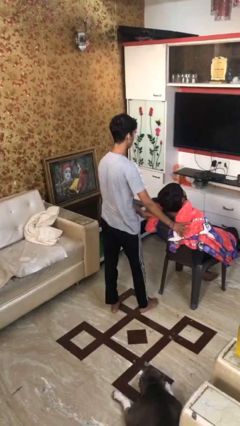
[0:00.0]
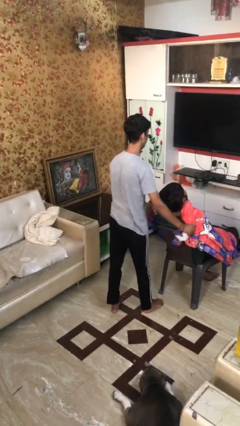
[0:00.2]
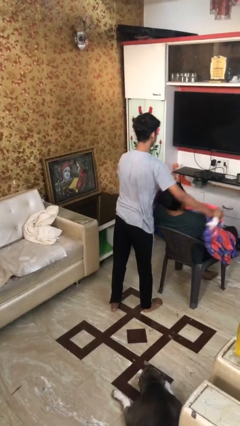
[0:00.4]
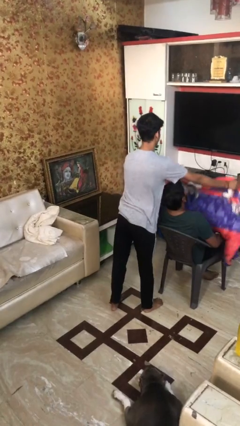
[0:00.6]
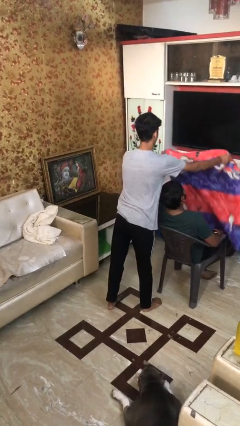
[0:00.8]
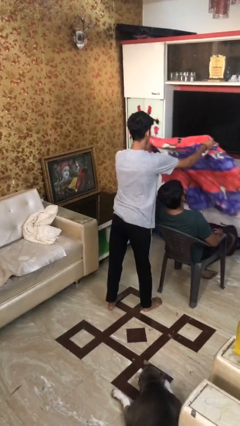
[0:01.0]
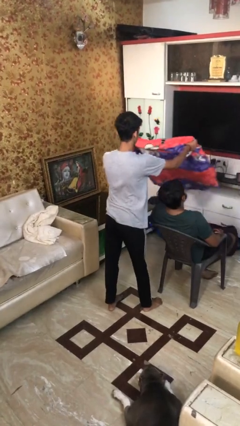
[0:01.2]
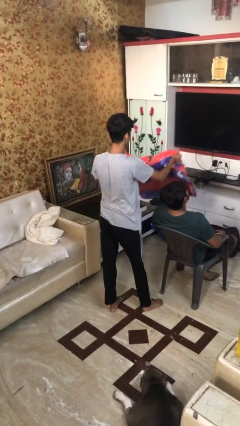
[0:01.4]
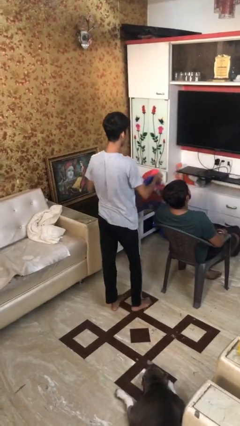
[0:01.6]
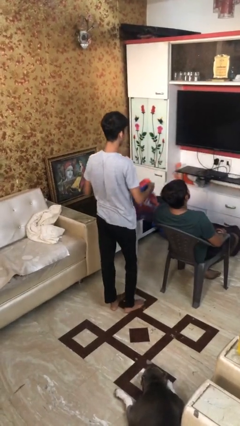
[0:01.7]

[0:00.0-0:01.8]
person uncovers friend with blanket

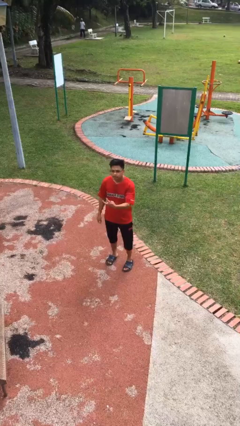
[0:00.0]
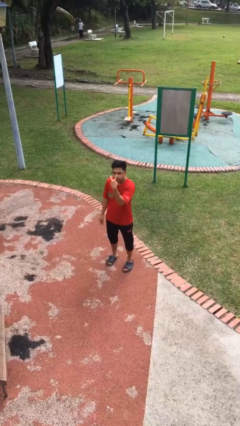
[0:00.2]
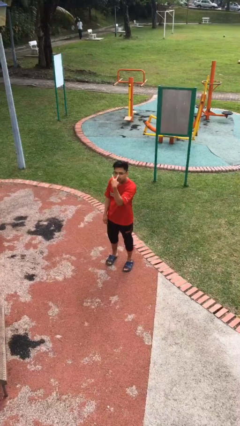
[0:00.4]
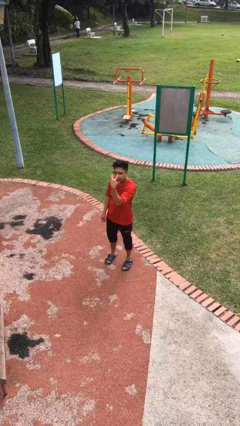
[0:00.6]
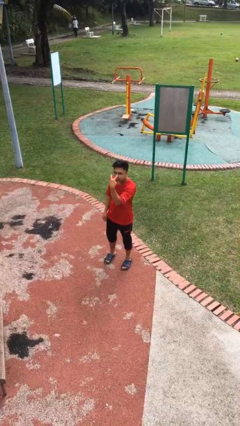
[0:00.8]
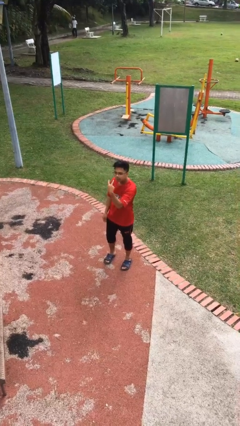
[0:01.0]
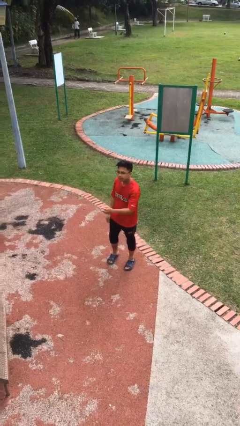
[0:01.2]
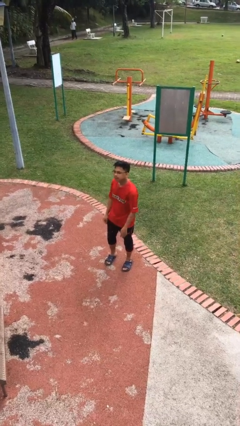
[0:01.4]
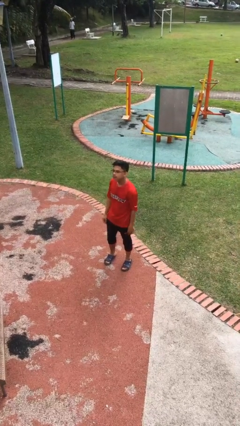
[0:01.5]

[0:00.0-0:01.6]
person gestures watch closely

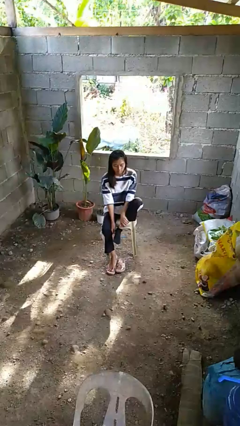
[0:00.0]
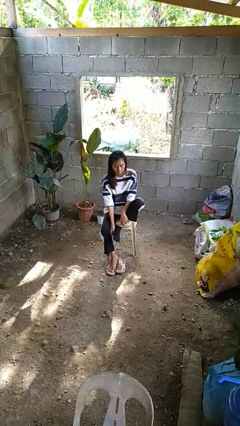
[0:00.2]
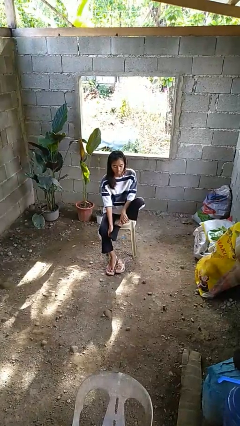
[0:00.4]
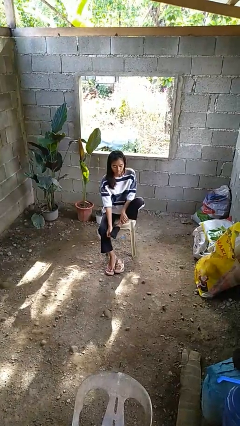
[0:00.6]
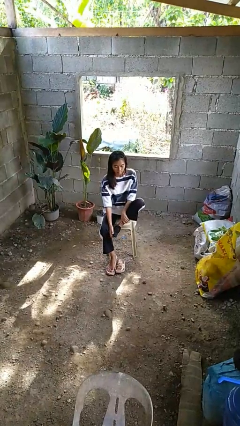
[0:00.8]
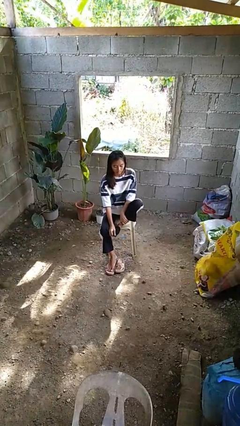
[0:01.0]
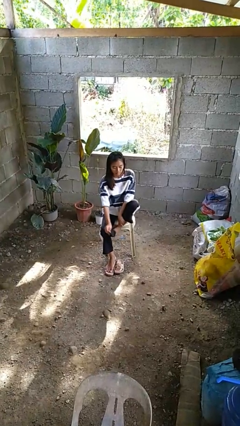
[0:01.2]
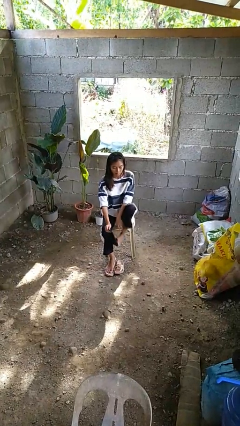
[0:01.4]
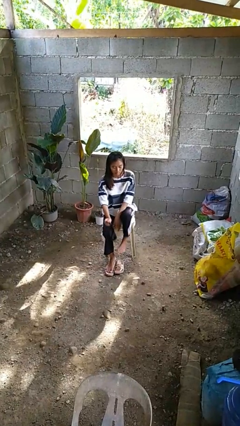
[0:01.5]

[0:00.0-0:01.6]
person takes off socks

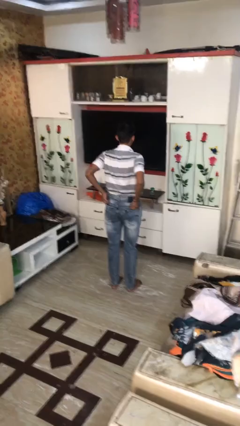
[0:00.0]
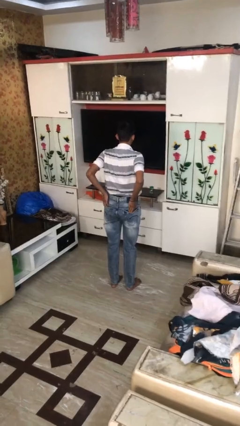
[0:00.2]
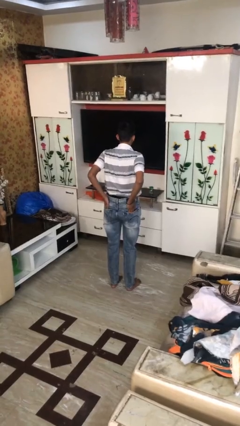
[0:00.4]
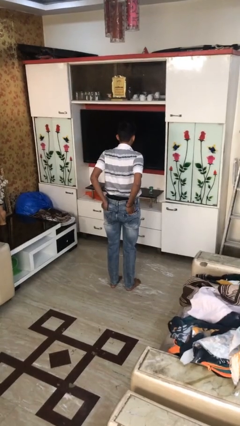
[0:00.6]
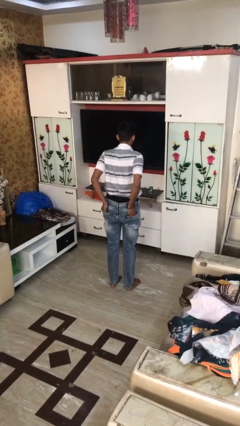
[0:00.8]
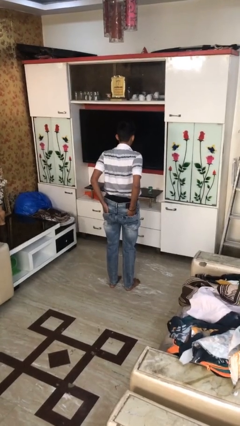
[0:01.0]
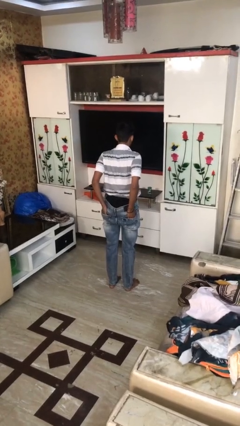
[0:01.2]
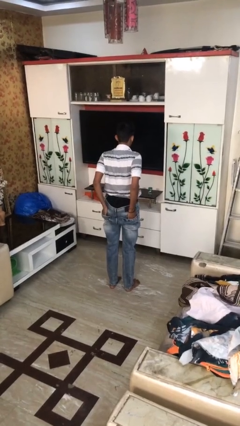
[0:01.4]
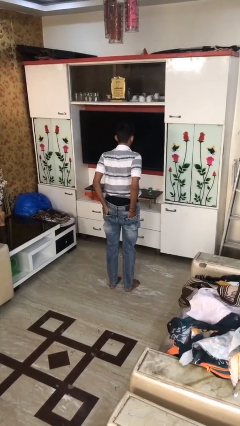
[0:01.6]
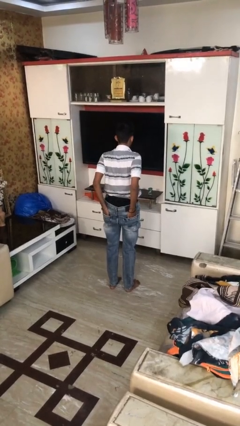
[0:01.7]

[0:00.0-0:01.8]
person puts hands in back pockets

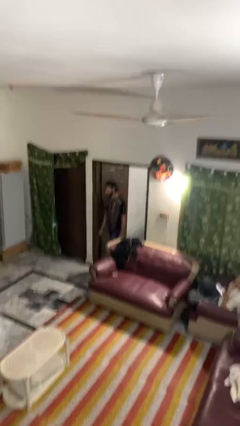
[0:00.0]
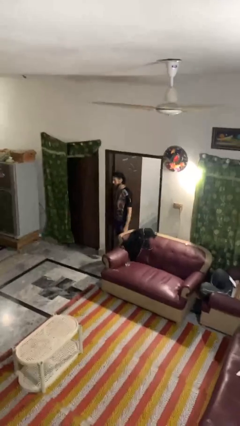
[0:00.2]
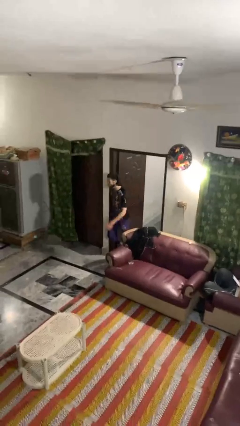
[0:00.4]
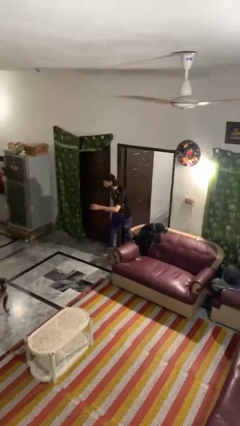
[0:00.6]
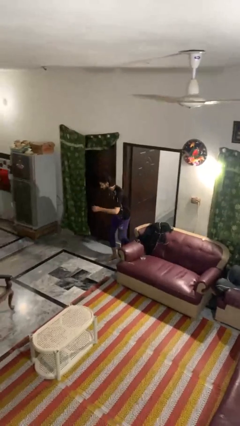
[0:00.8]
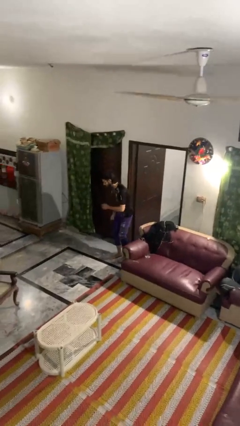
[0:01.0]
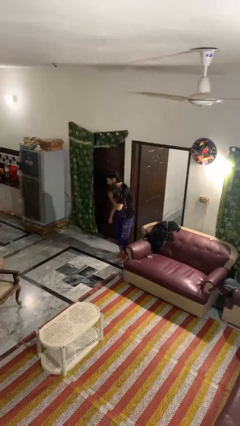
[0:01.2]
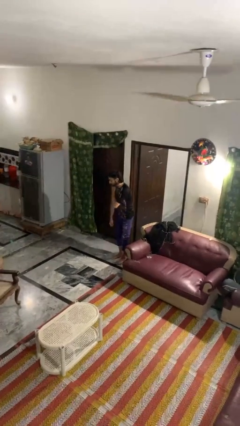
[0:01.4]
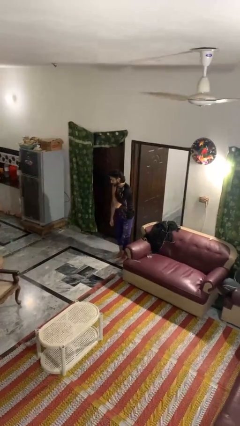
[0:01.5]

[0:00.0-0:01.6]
person bumps into wall

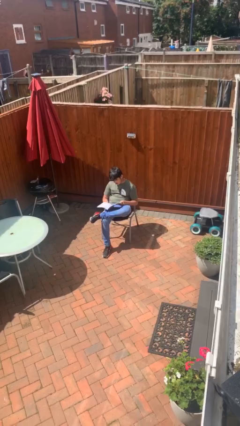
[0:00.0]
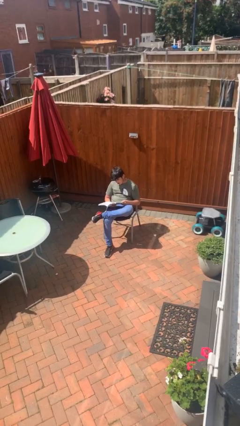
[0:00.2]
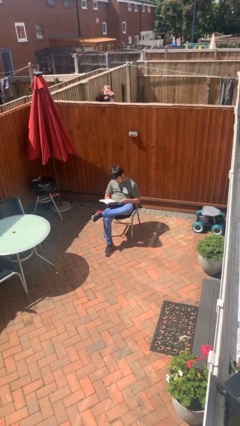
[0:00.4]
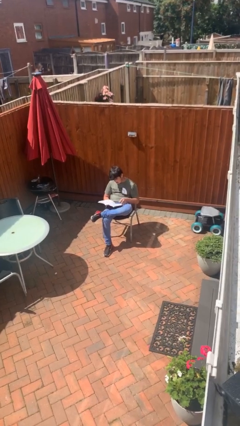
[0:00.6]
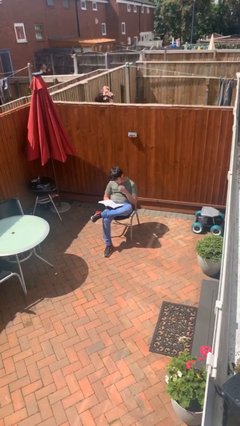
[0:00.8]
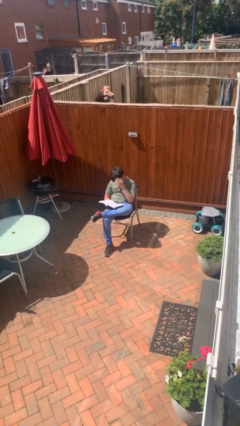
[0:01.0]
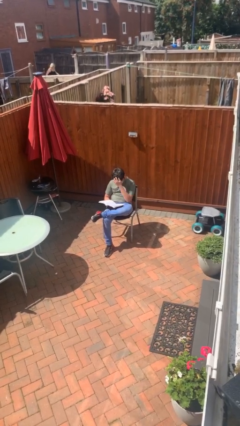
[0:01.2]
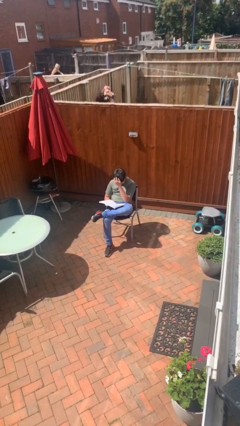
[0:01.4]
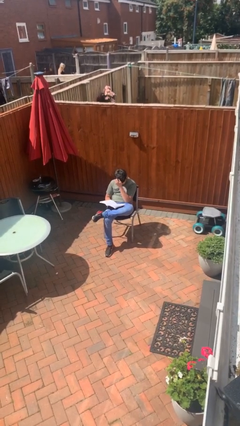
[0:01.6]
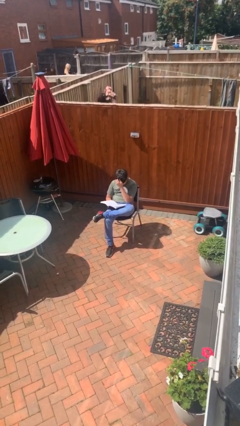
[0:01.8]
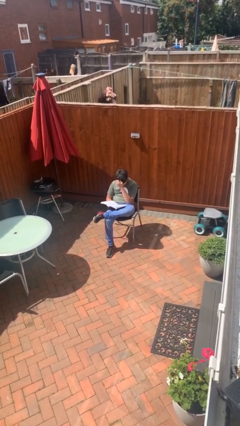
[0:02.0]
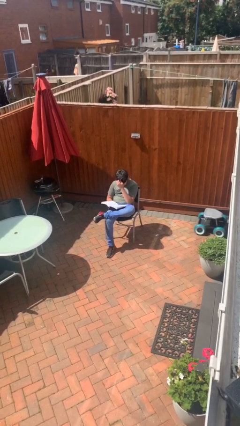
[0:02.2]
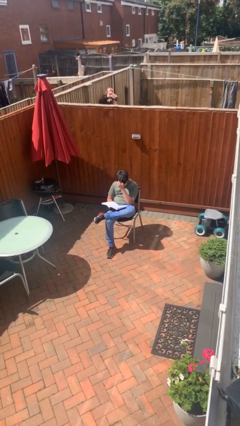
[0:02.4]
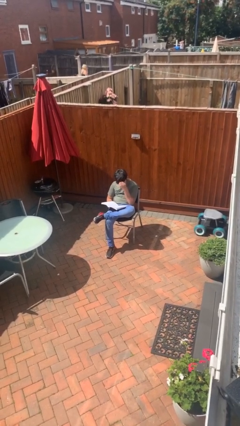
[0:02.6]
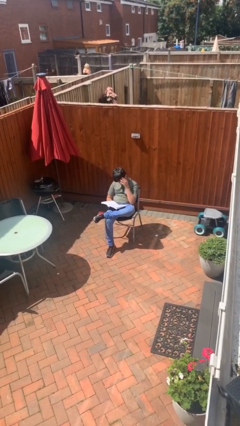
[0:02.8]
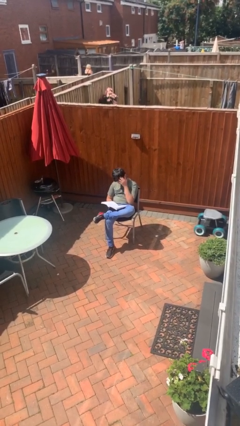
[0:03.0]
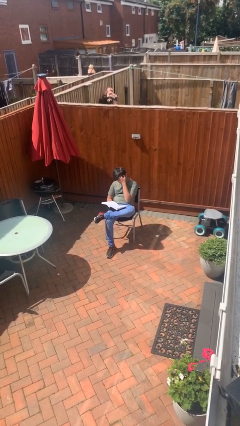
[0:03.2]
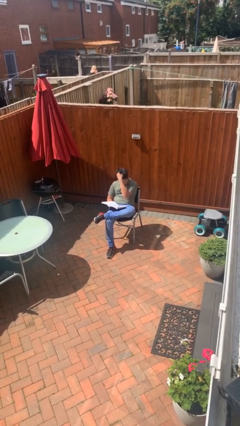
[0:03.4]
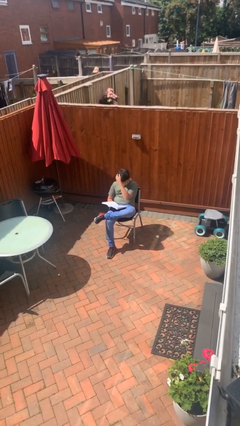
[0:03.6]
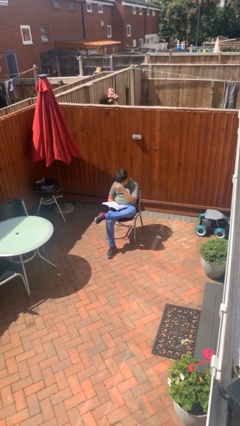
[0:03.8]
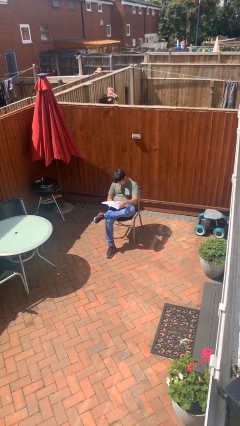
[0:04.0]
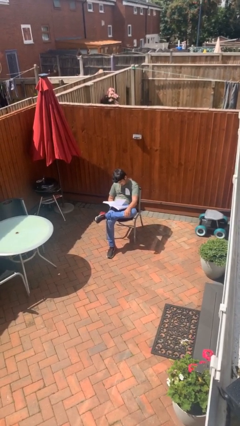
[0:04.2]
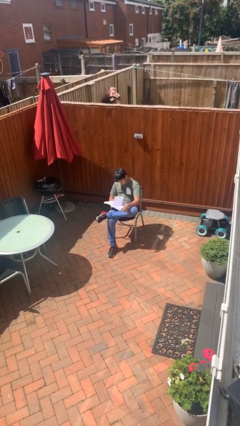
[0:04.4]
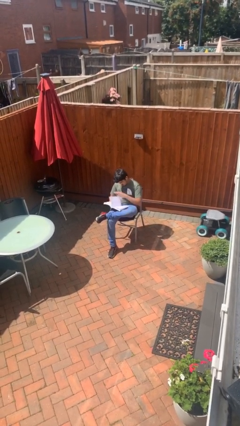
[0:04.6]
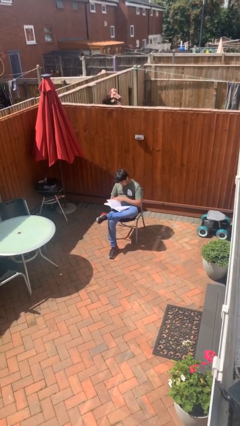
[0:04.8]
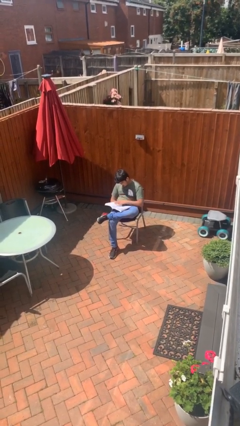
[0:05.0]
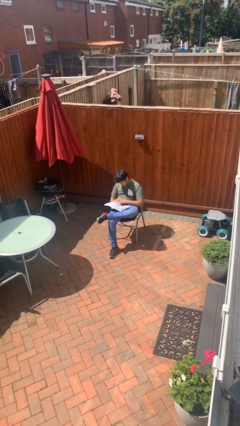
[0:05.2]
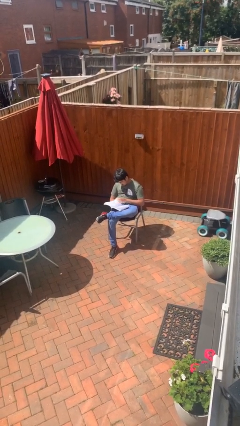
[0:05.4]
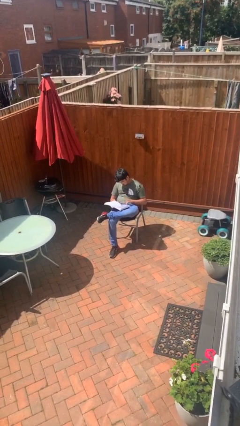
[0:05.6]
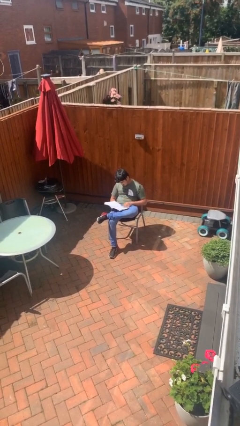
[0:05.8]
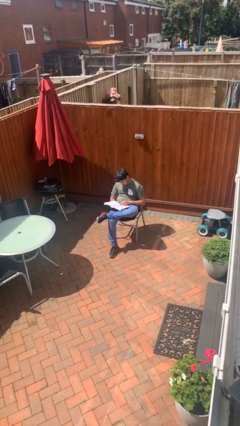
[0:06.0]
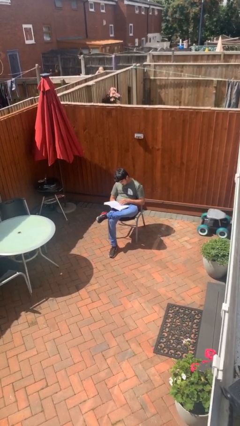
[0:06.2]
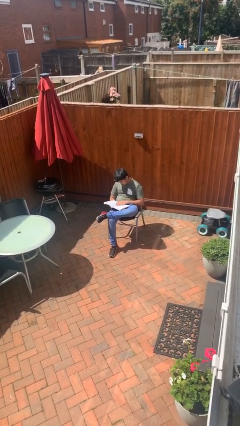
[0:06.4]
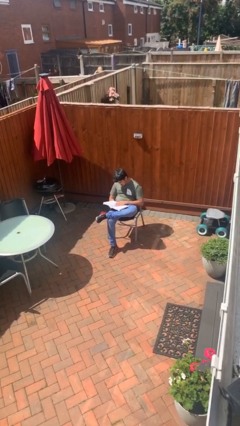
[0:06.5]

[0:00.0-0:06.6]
person reads document

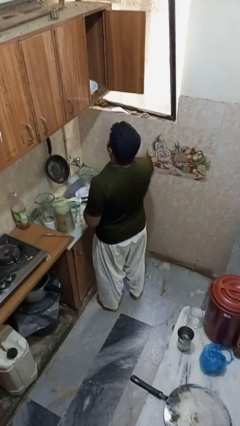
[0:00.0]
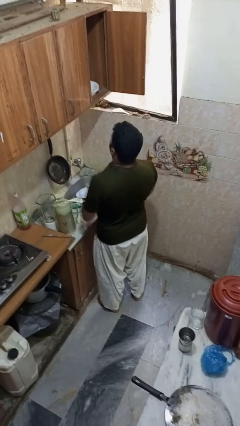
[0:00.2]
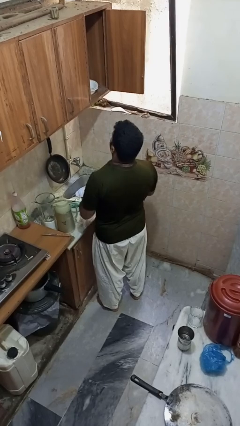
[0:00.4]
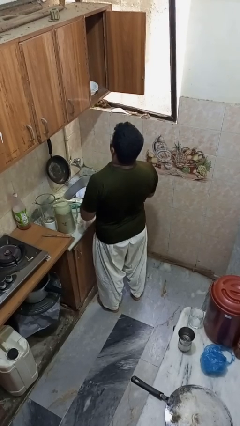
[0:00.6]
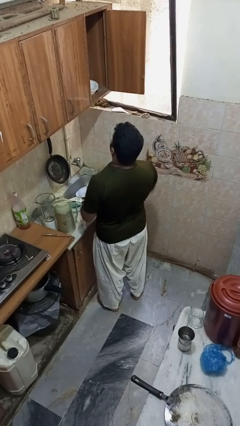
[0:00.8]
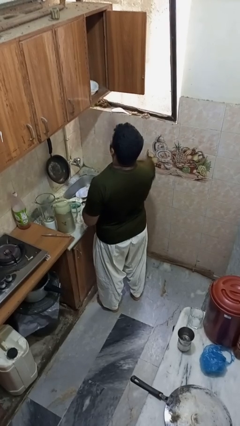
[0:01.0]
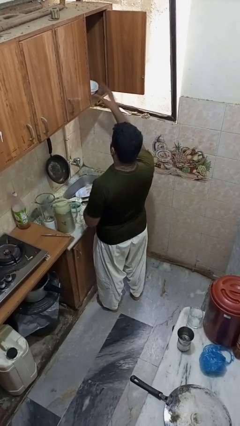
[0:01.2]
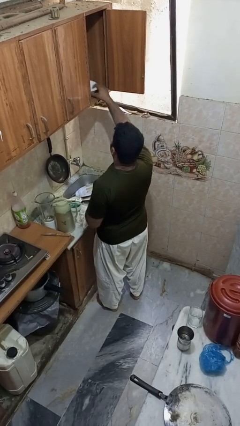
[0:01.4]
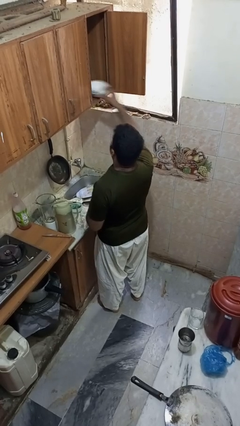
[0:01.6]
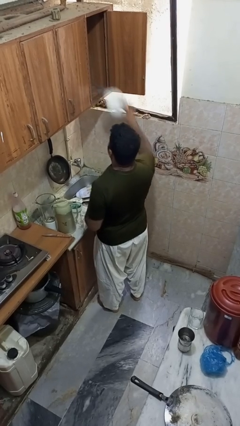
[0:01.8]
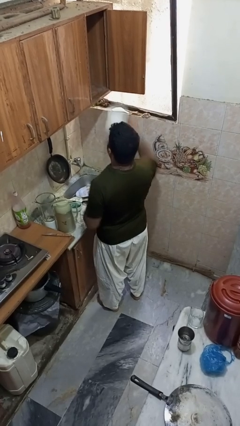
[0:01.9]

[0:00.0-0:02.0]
person takes object from cabinet
